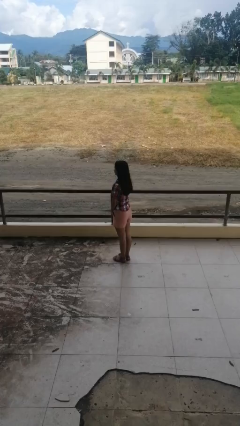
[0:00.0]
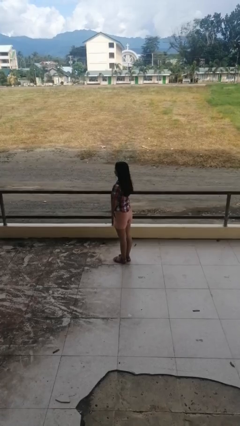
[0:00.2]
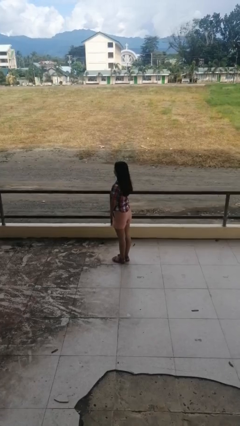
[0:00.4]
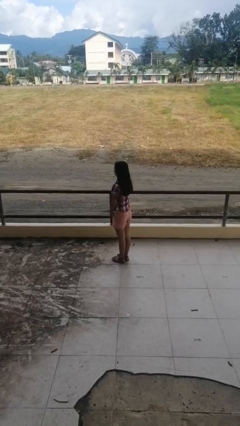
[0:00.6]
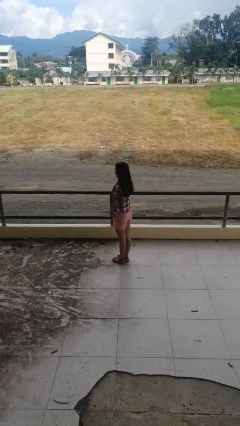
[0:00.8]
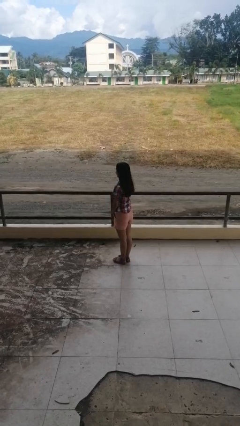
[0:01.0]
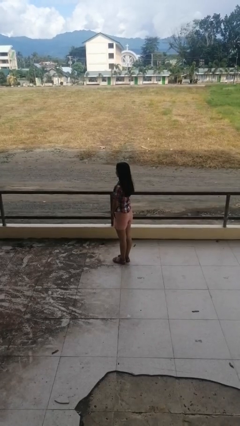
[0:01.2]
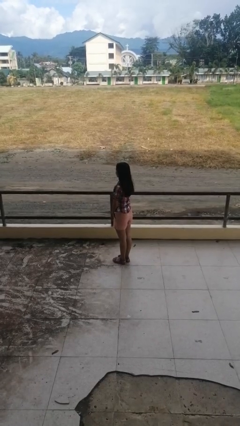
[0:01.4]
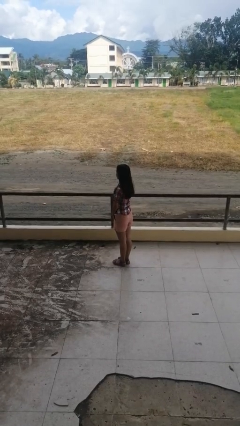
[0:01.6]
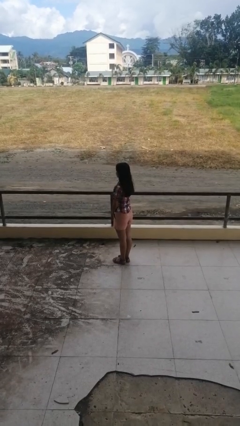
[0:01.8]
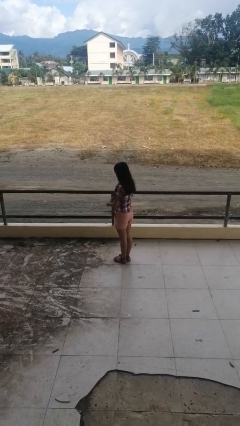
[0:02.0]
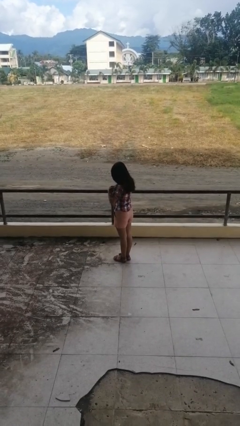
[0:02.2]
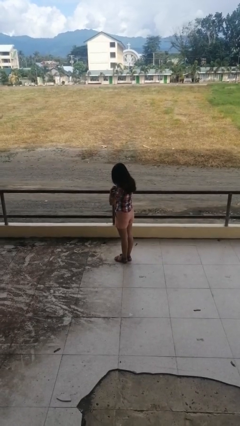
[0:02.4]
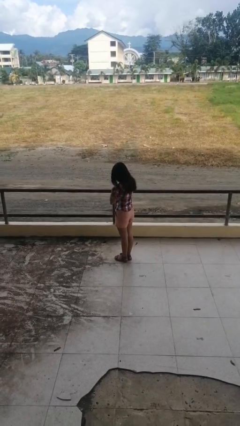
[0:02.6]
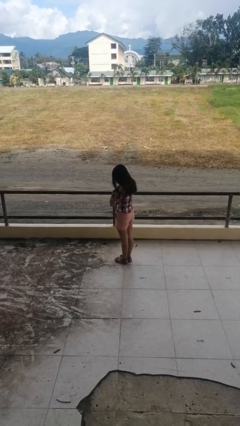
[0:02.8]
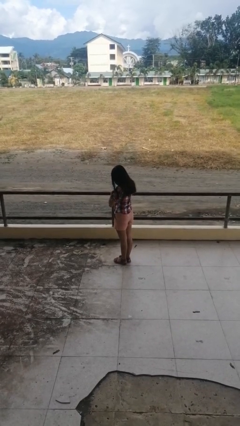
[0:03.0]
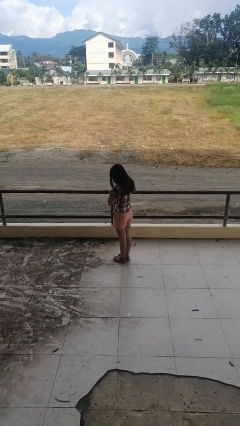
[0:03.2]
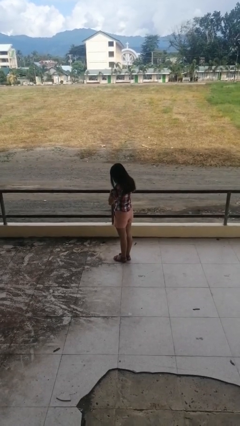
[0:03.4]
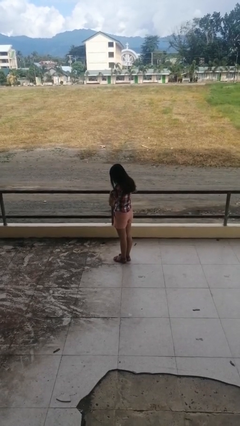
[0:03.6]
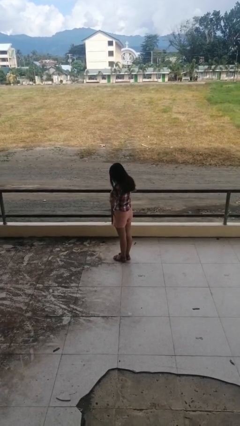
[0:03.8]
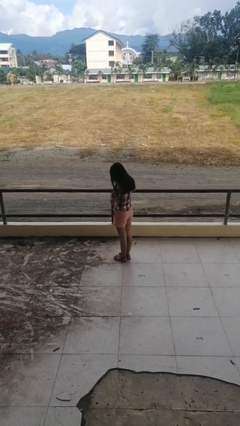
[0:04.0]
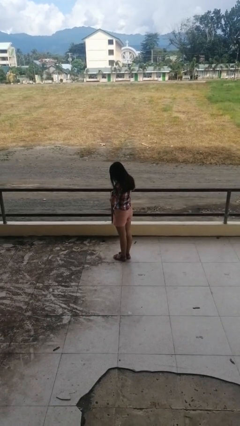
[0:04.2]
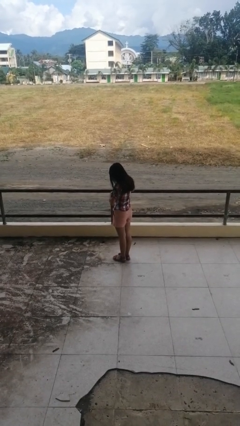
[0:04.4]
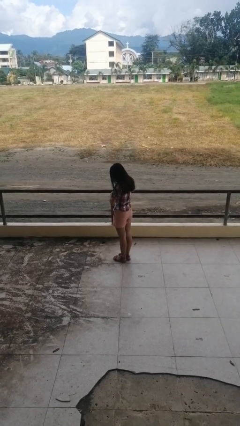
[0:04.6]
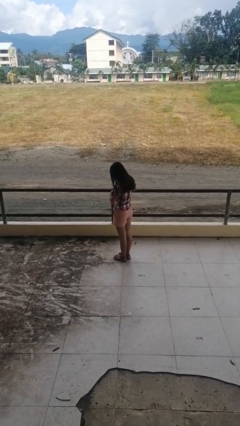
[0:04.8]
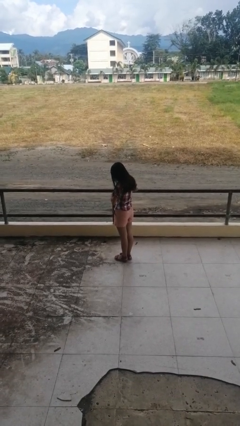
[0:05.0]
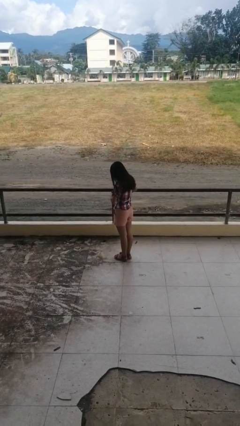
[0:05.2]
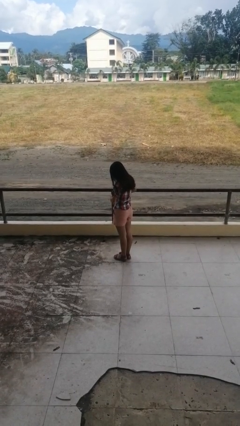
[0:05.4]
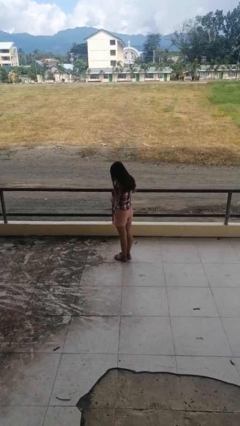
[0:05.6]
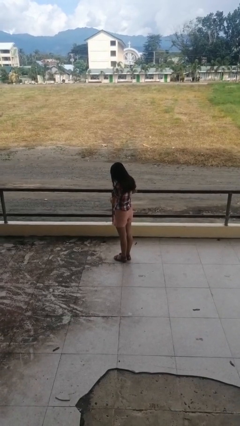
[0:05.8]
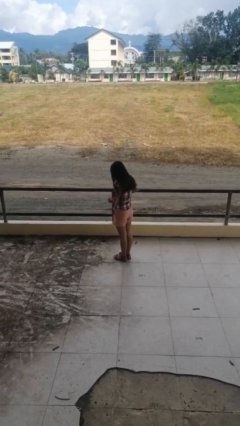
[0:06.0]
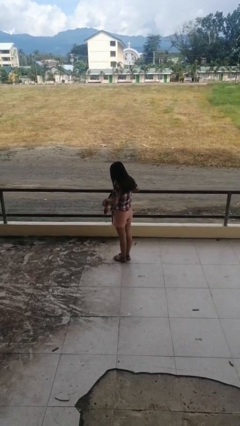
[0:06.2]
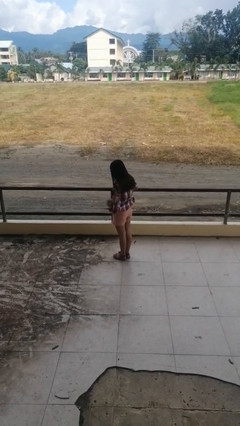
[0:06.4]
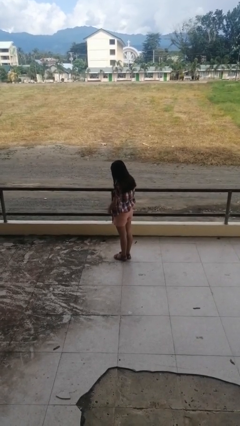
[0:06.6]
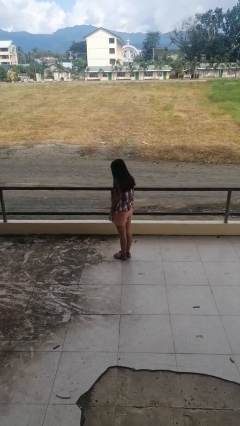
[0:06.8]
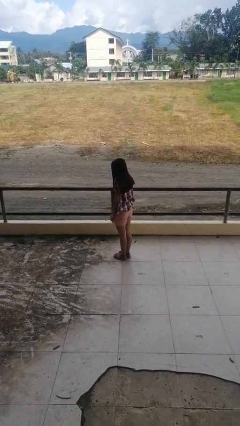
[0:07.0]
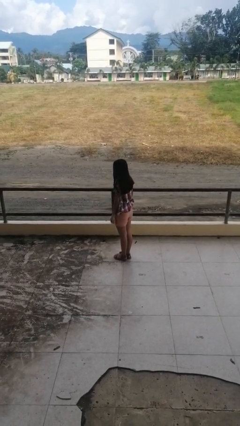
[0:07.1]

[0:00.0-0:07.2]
person unbuttons shirt

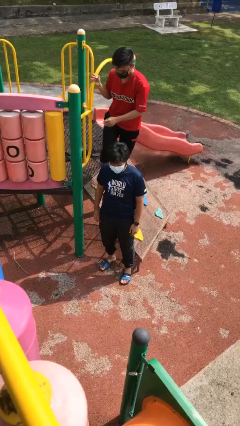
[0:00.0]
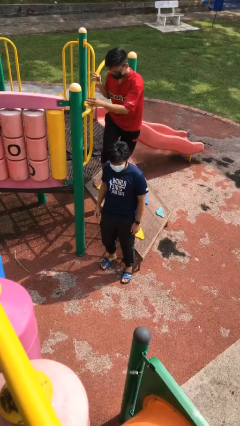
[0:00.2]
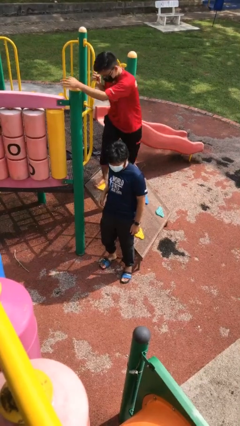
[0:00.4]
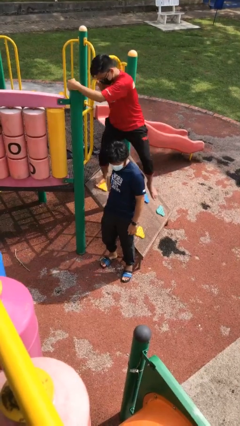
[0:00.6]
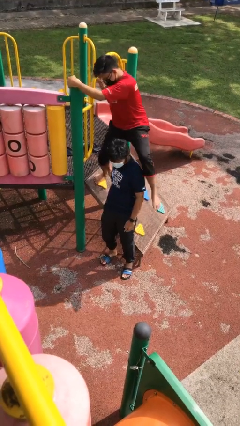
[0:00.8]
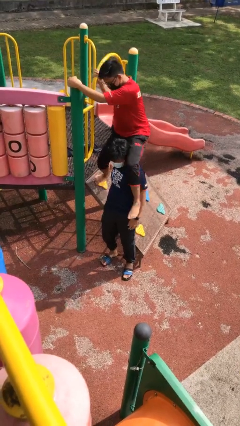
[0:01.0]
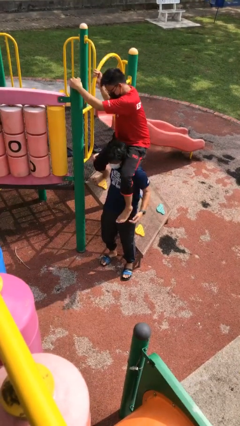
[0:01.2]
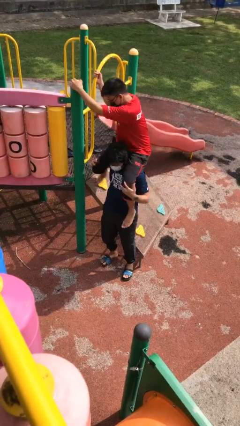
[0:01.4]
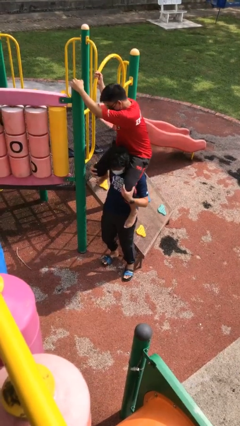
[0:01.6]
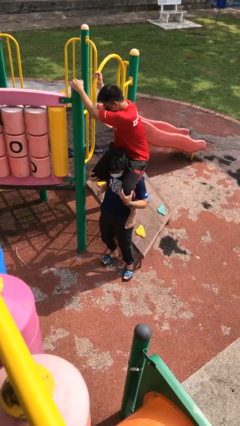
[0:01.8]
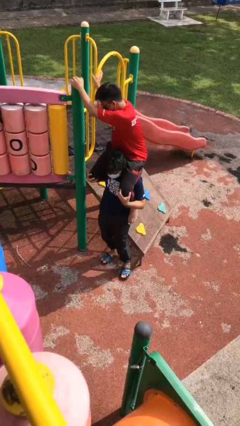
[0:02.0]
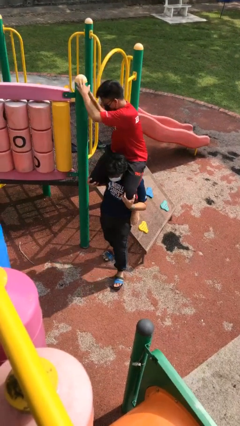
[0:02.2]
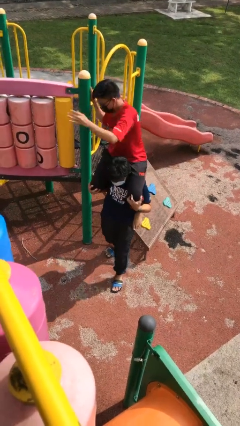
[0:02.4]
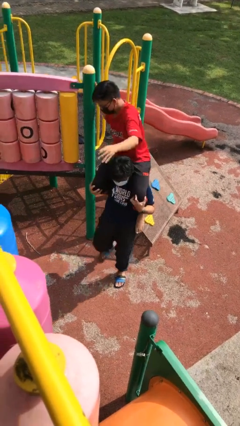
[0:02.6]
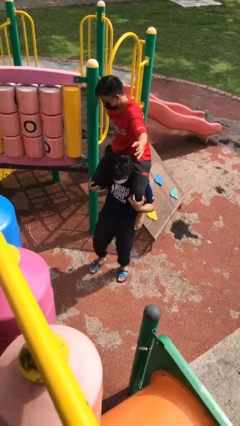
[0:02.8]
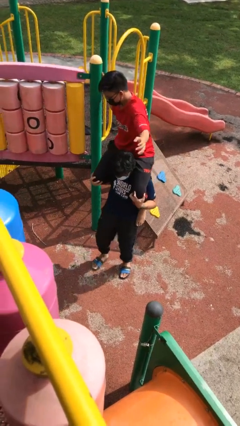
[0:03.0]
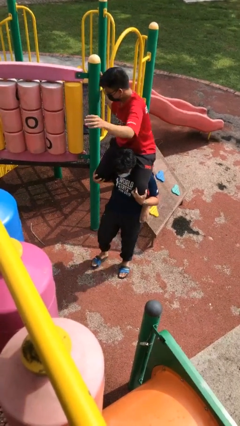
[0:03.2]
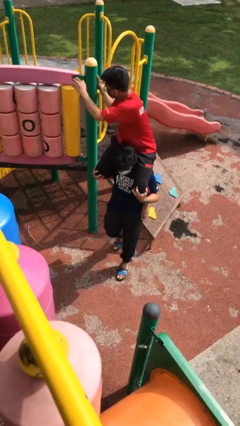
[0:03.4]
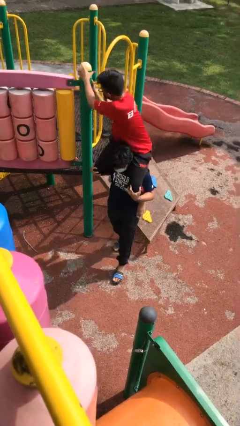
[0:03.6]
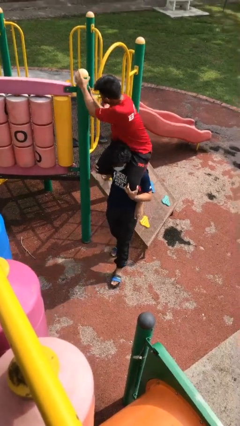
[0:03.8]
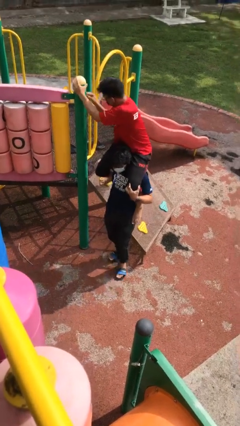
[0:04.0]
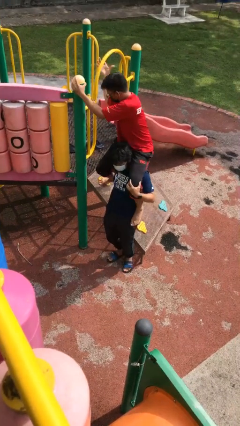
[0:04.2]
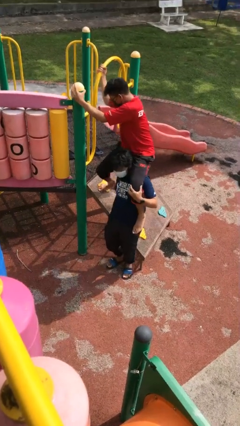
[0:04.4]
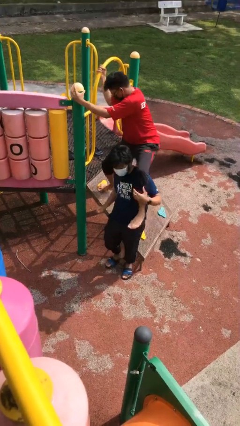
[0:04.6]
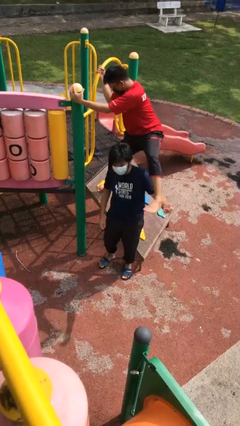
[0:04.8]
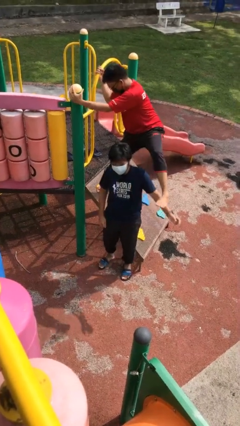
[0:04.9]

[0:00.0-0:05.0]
person carries person on shoulders

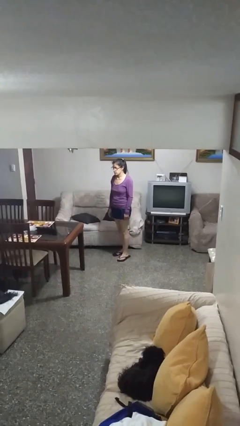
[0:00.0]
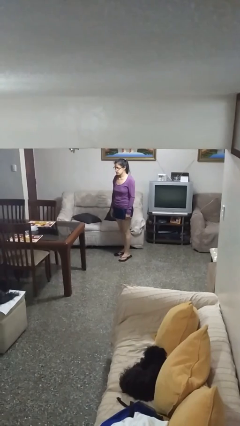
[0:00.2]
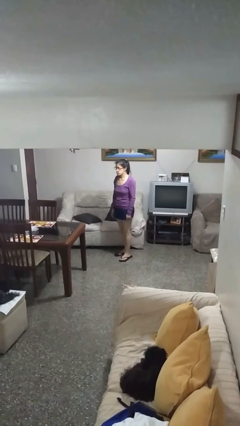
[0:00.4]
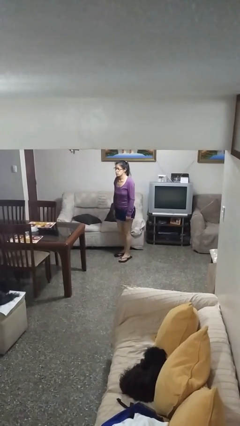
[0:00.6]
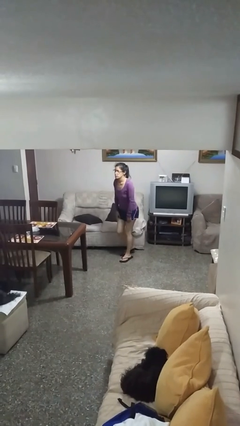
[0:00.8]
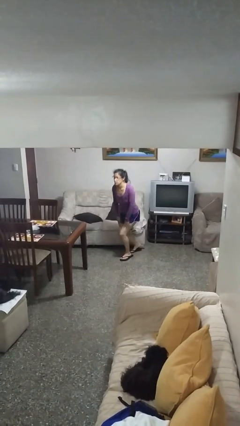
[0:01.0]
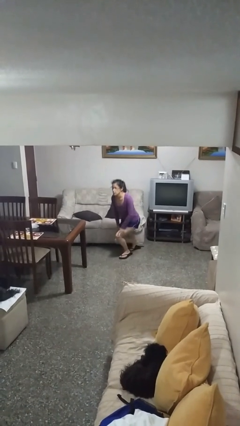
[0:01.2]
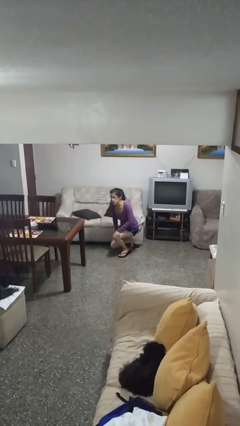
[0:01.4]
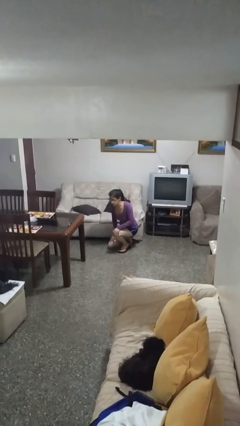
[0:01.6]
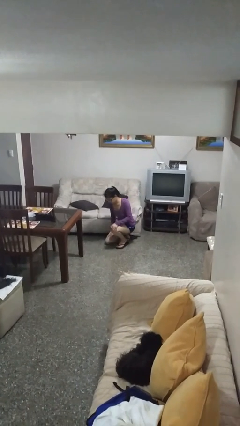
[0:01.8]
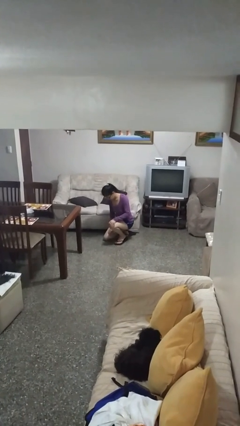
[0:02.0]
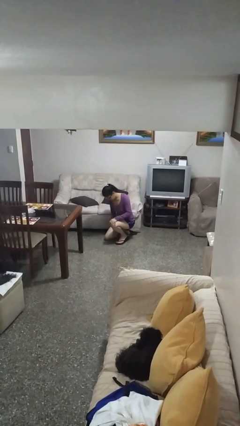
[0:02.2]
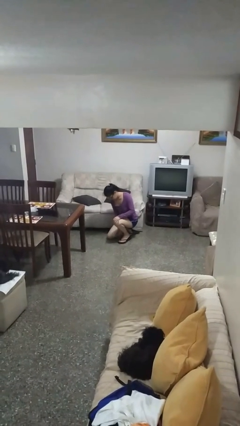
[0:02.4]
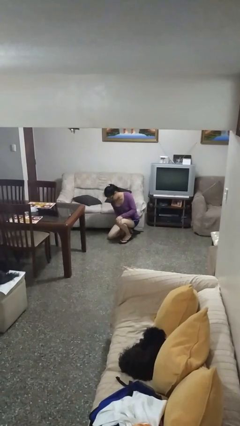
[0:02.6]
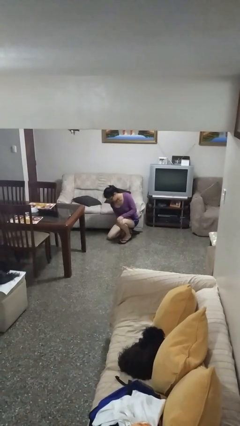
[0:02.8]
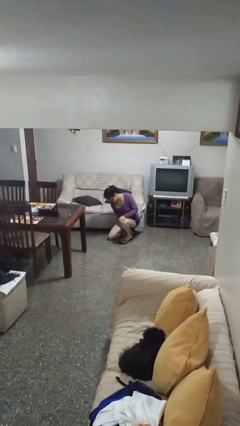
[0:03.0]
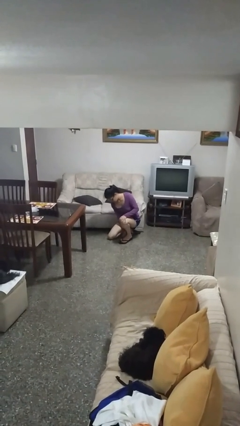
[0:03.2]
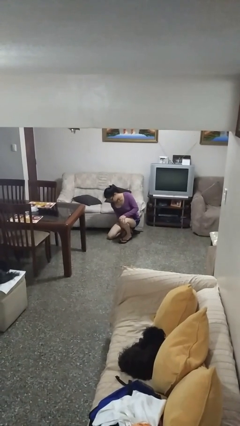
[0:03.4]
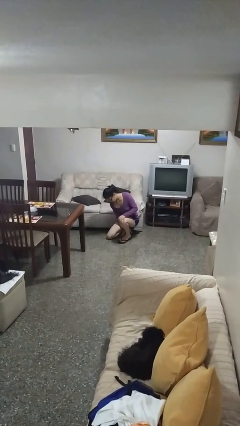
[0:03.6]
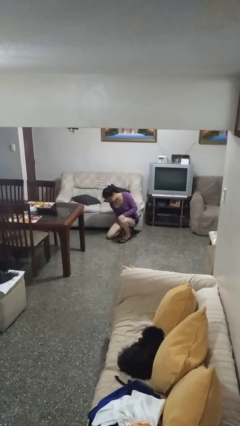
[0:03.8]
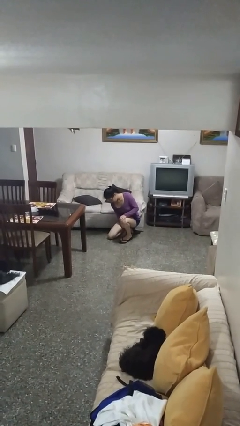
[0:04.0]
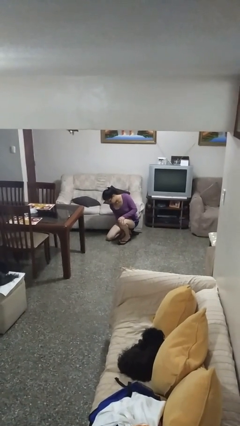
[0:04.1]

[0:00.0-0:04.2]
person kneels

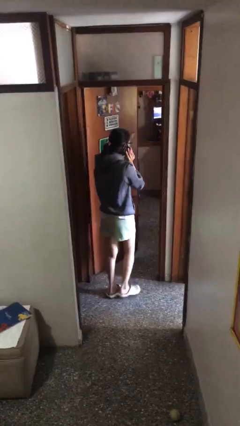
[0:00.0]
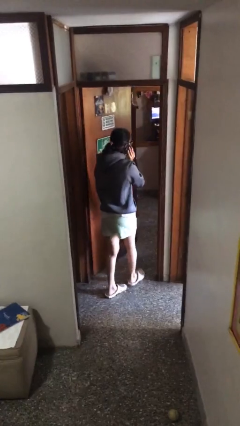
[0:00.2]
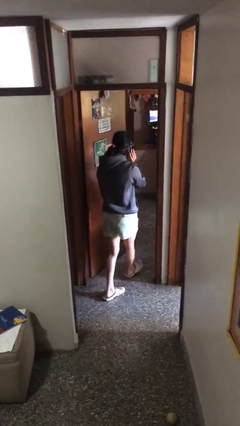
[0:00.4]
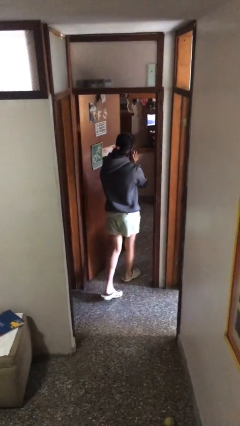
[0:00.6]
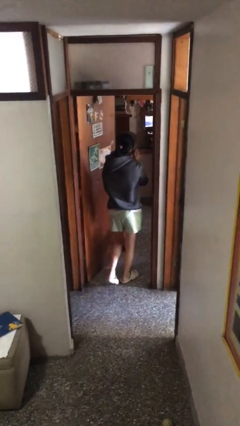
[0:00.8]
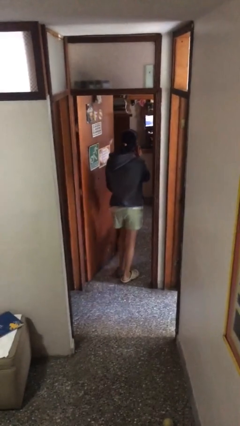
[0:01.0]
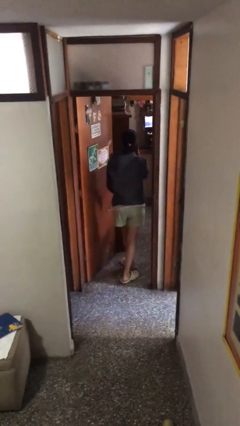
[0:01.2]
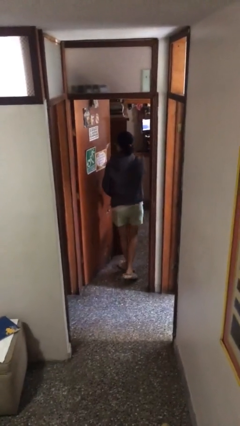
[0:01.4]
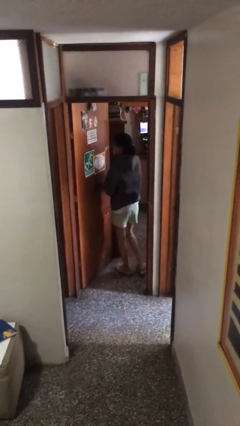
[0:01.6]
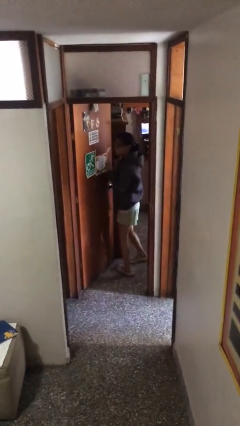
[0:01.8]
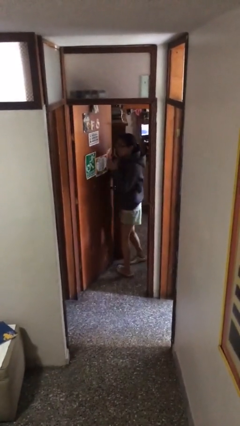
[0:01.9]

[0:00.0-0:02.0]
person exits scene through structure
